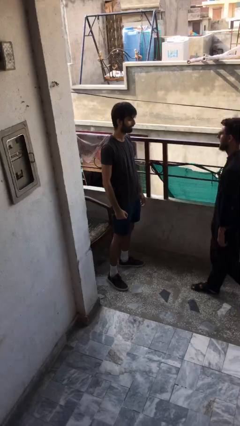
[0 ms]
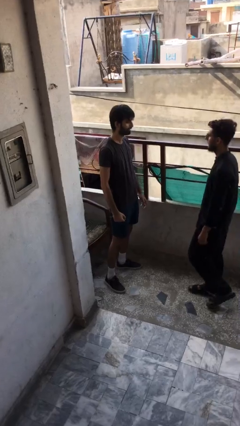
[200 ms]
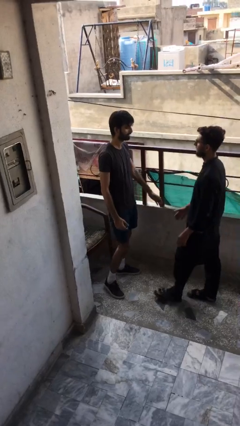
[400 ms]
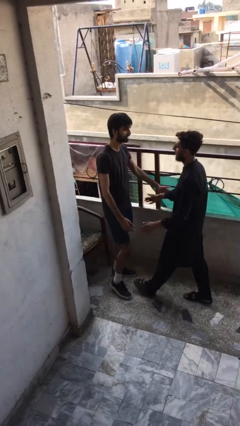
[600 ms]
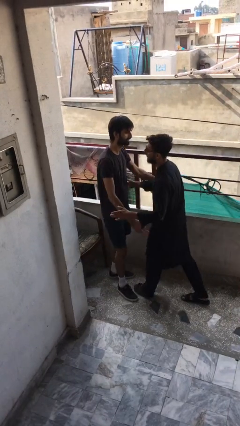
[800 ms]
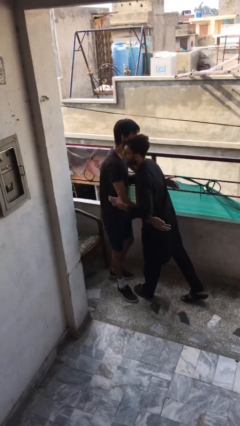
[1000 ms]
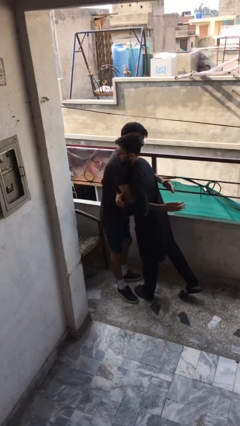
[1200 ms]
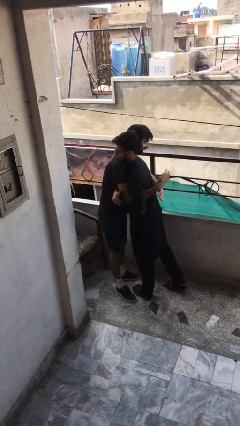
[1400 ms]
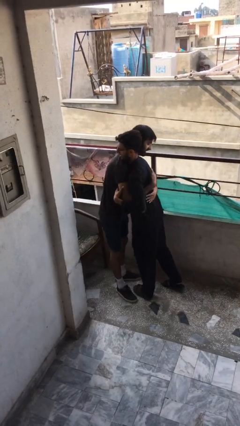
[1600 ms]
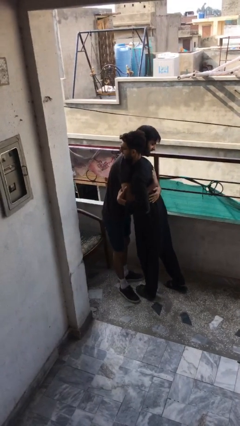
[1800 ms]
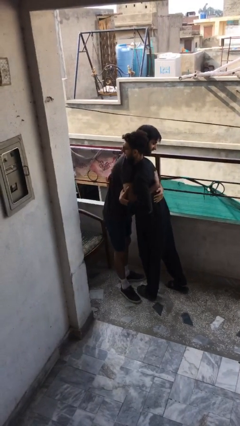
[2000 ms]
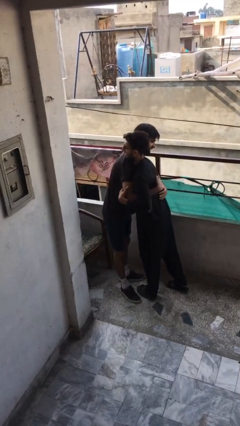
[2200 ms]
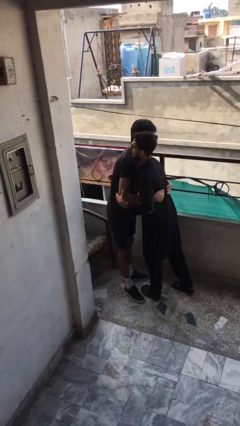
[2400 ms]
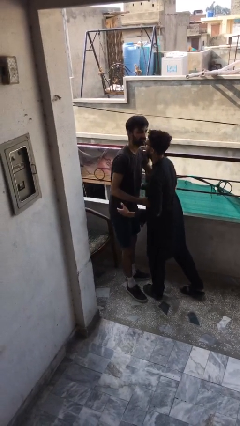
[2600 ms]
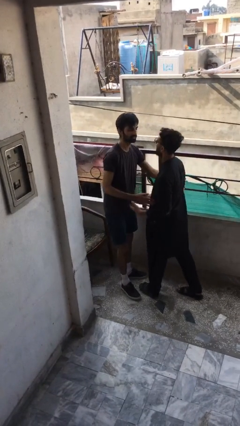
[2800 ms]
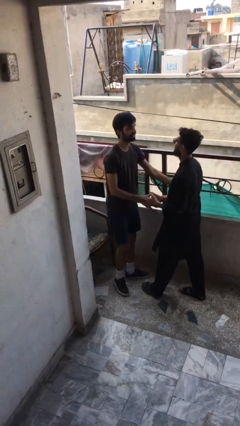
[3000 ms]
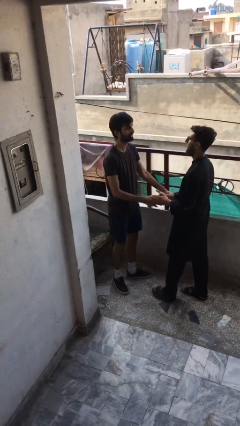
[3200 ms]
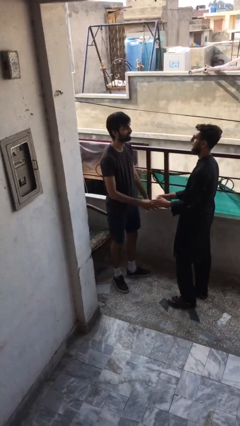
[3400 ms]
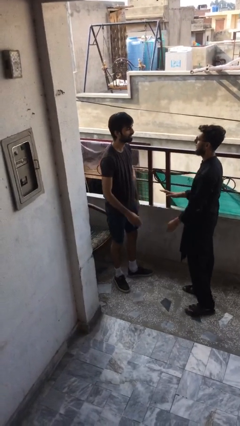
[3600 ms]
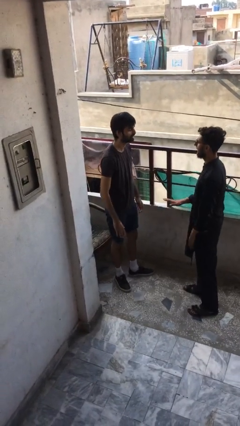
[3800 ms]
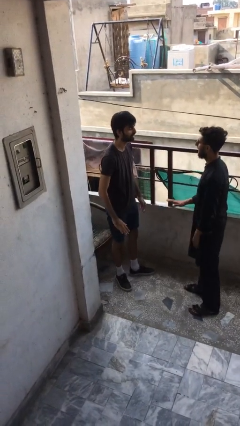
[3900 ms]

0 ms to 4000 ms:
person embraces person

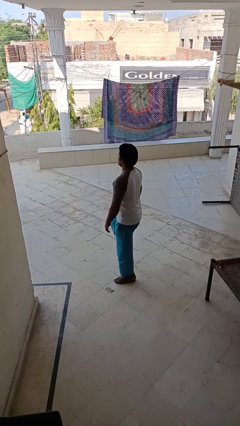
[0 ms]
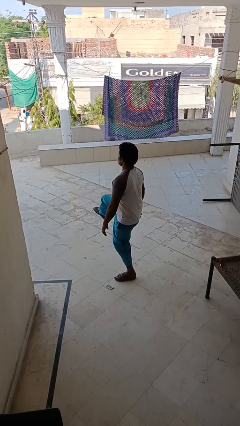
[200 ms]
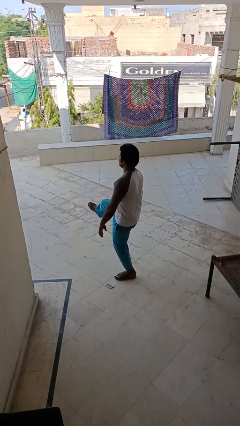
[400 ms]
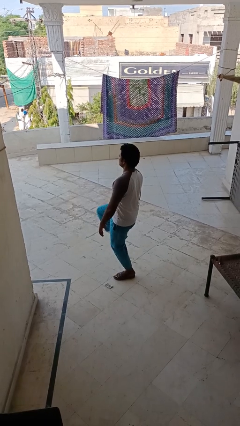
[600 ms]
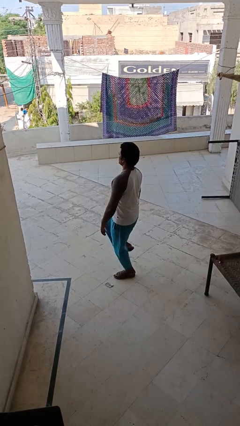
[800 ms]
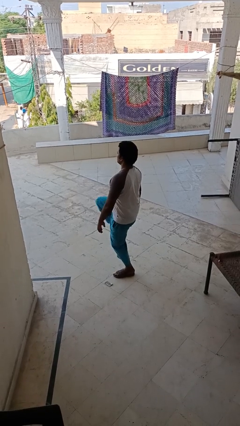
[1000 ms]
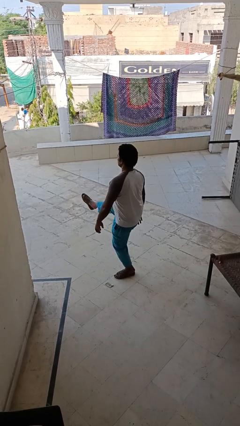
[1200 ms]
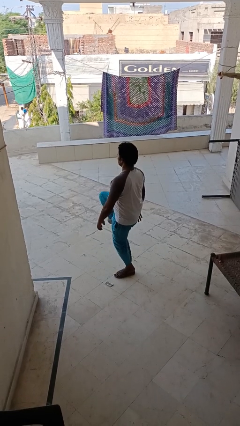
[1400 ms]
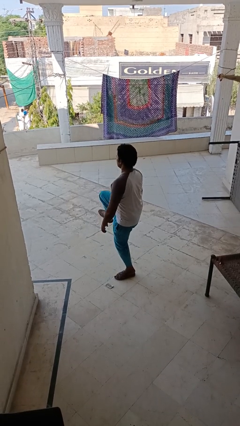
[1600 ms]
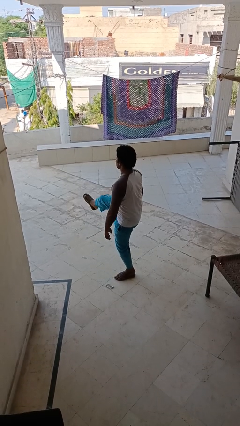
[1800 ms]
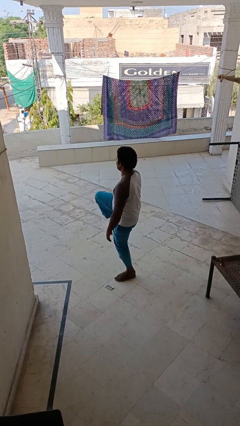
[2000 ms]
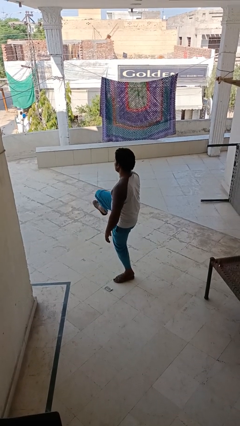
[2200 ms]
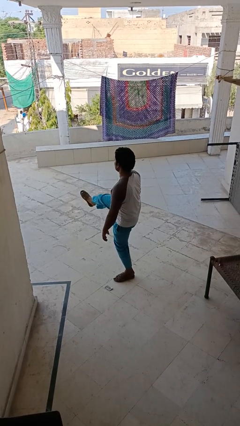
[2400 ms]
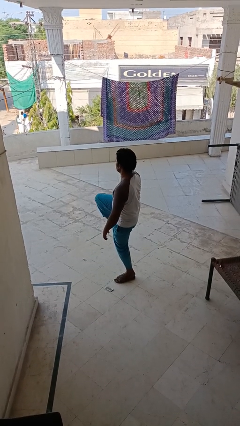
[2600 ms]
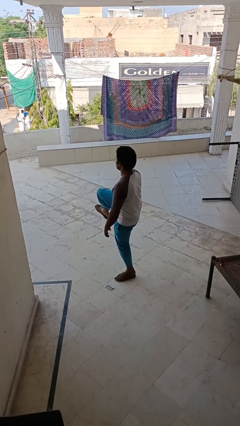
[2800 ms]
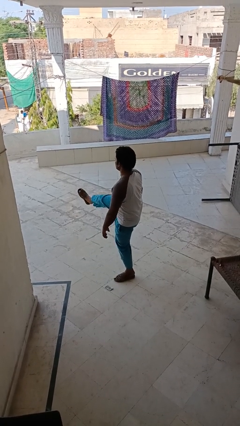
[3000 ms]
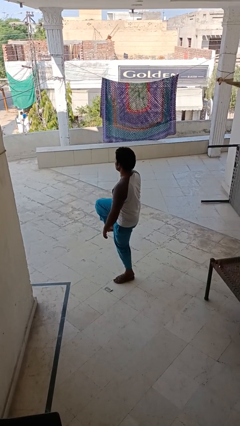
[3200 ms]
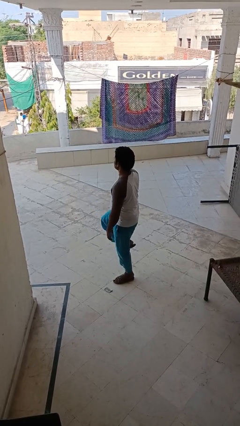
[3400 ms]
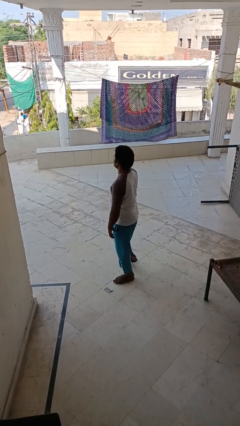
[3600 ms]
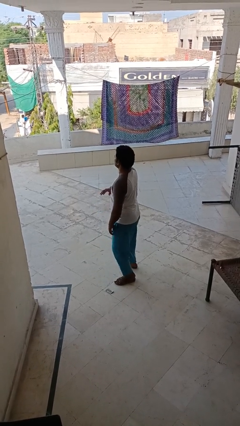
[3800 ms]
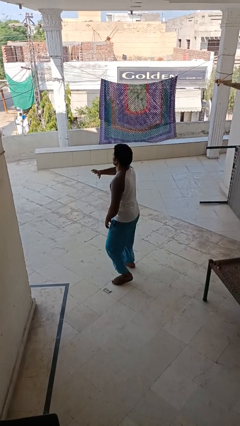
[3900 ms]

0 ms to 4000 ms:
person karate kicks

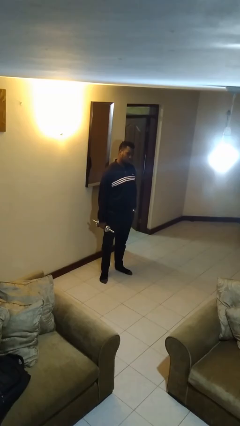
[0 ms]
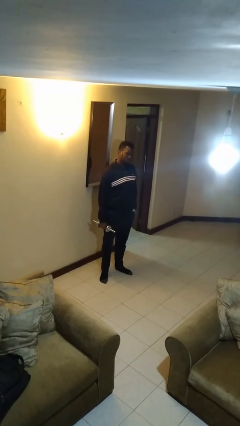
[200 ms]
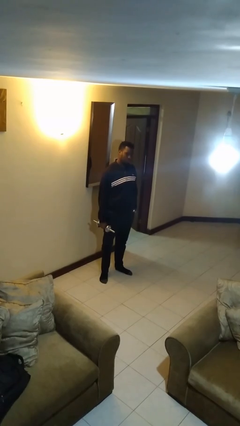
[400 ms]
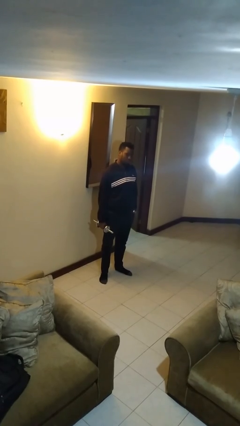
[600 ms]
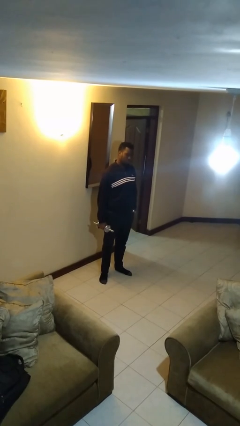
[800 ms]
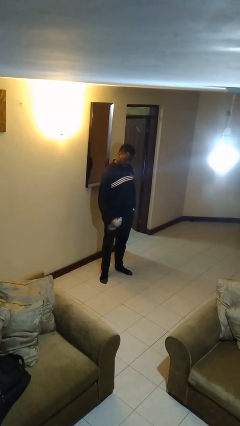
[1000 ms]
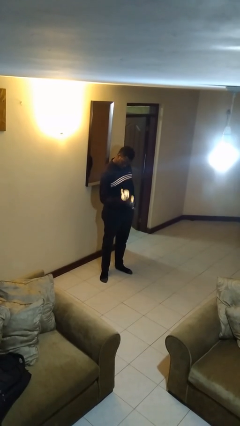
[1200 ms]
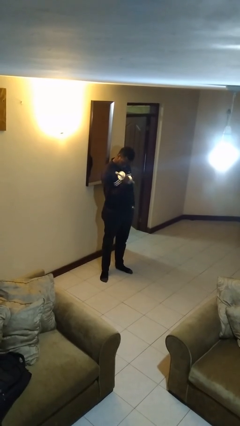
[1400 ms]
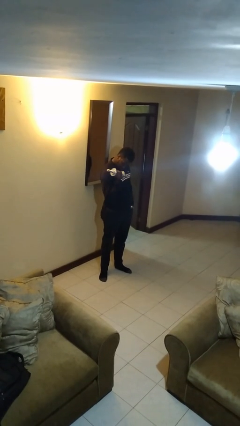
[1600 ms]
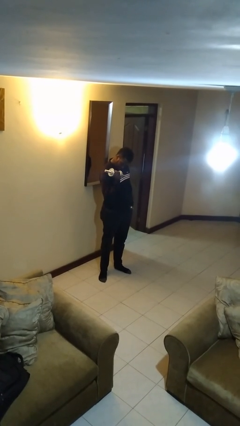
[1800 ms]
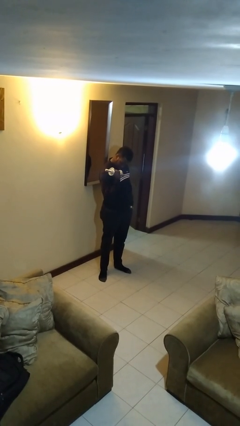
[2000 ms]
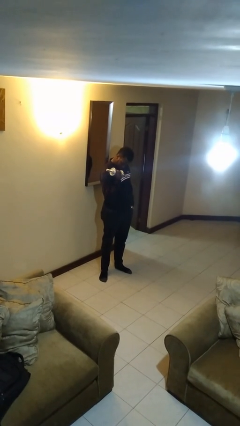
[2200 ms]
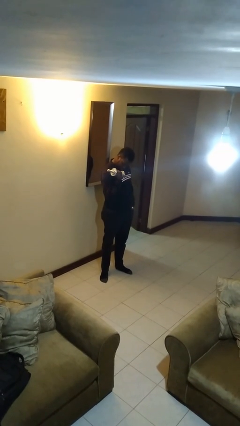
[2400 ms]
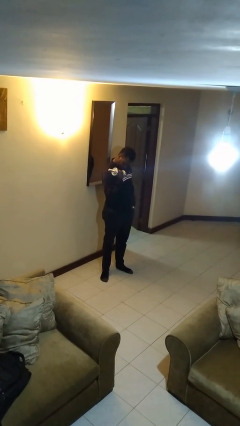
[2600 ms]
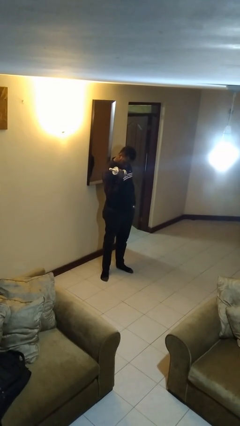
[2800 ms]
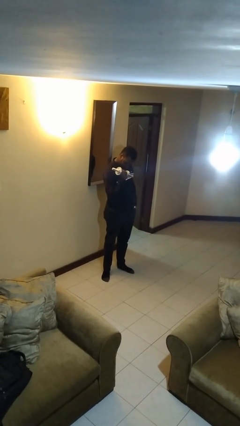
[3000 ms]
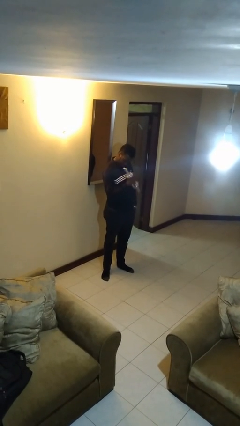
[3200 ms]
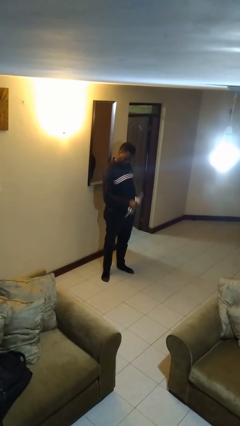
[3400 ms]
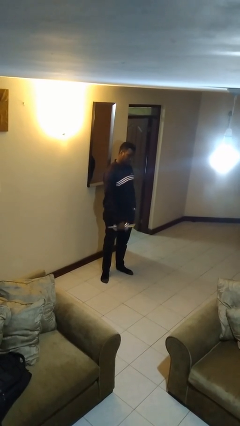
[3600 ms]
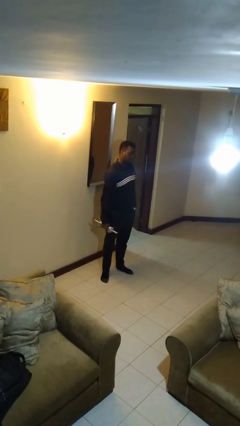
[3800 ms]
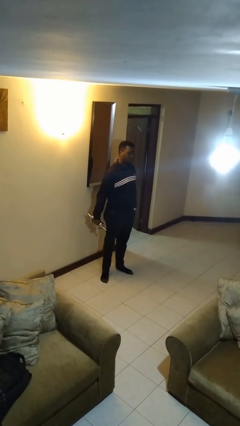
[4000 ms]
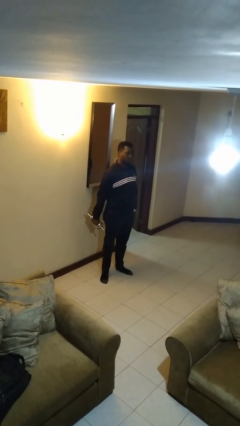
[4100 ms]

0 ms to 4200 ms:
person lifts dumbbells

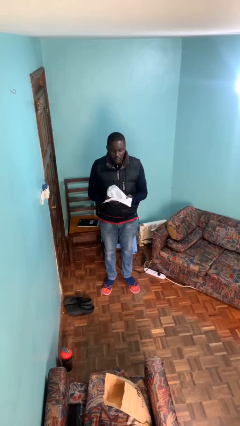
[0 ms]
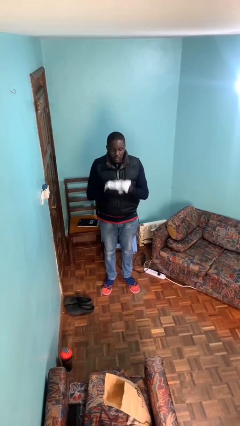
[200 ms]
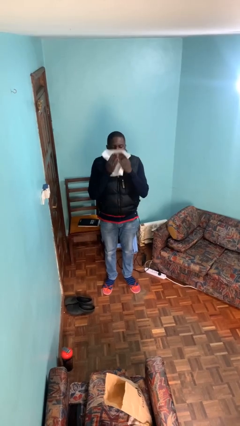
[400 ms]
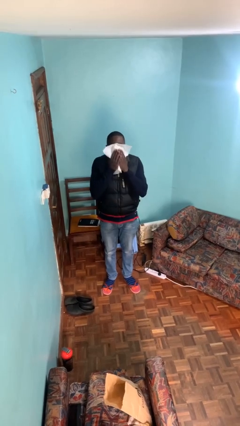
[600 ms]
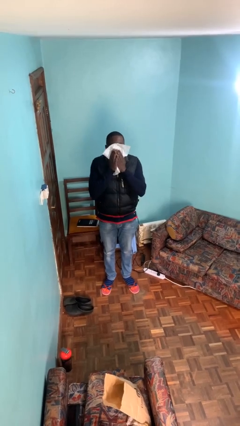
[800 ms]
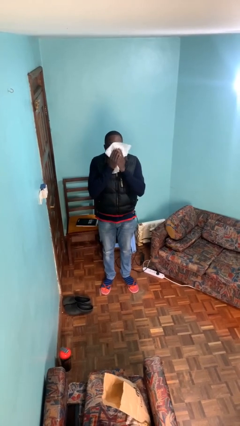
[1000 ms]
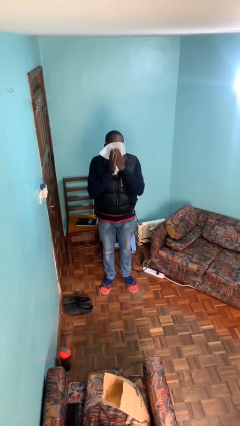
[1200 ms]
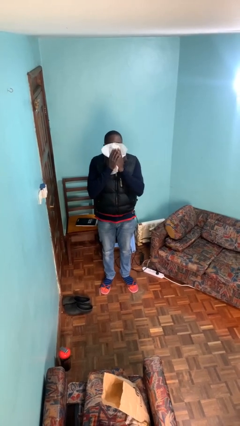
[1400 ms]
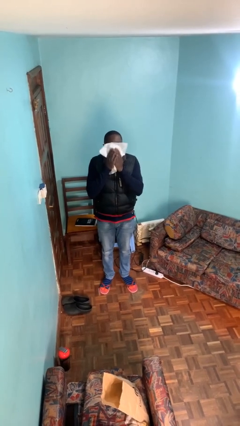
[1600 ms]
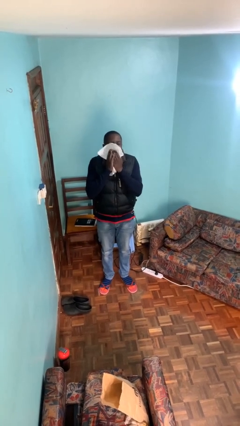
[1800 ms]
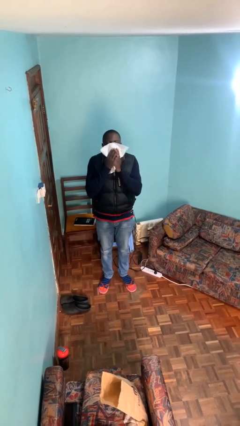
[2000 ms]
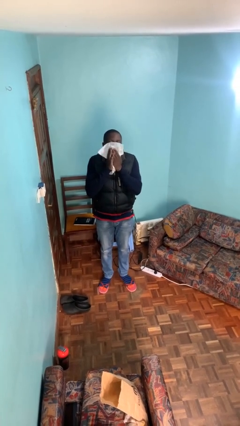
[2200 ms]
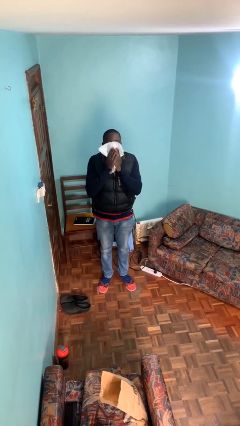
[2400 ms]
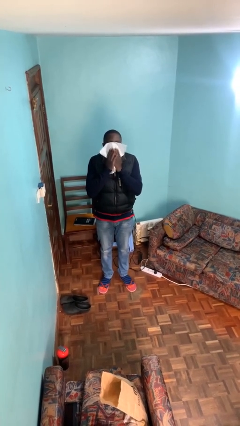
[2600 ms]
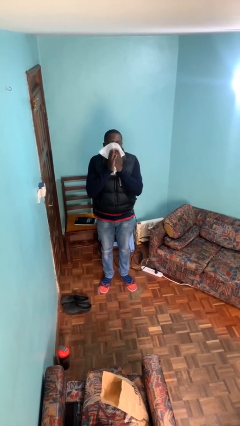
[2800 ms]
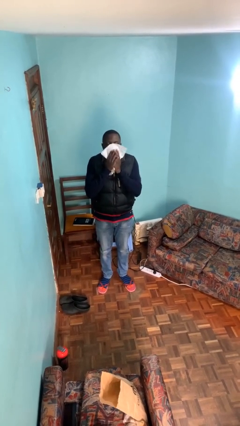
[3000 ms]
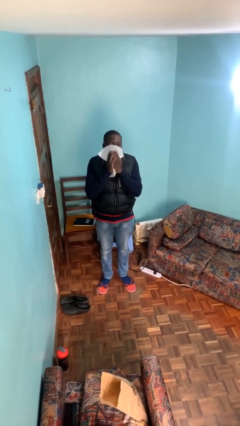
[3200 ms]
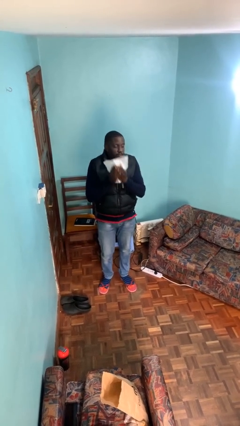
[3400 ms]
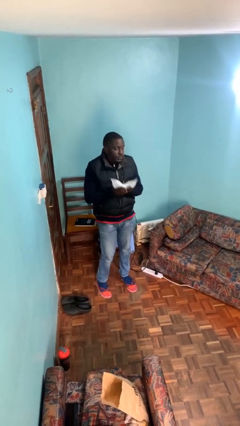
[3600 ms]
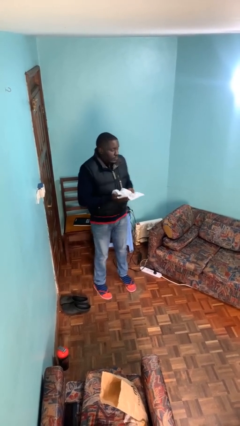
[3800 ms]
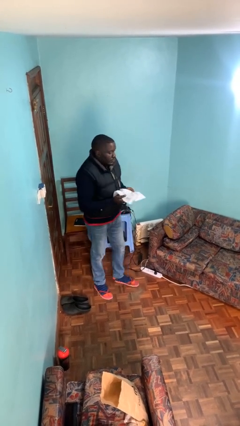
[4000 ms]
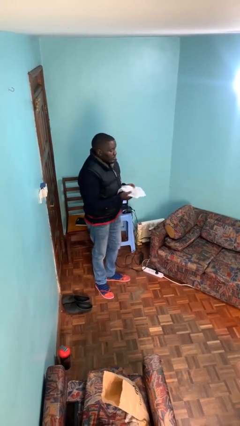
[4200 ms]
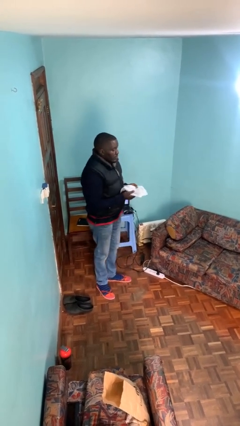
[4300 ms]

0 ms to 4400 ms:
person wipes mouth with napkin

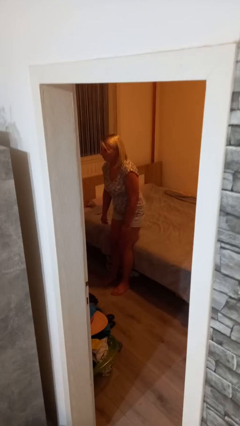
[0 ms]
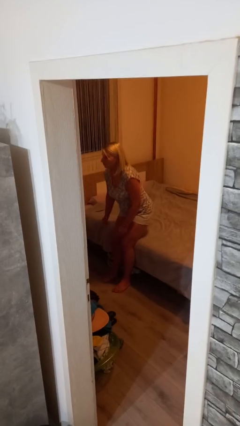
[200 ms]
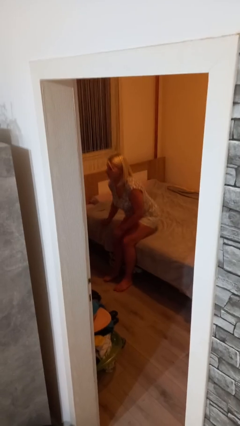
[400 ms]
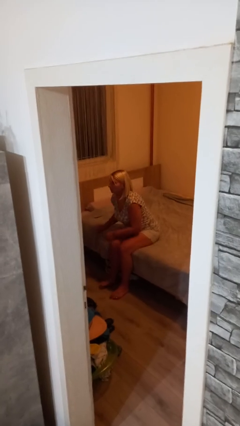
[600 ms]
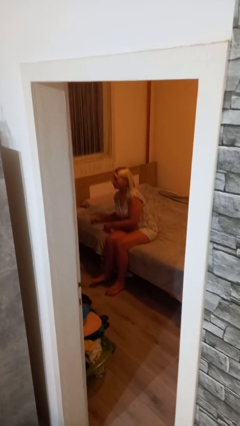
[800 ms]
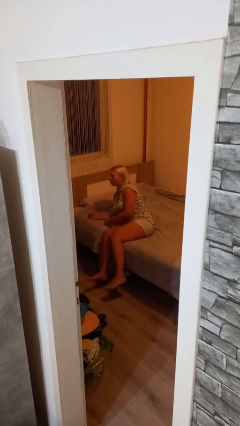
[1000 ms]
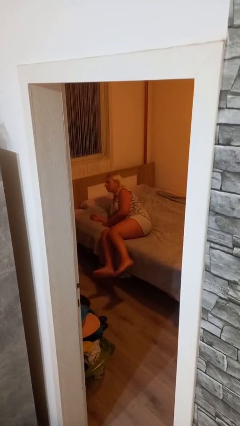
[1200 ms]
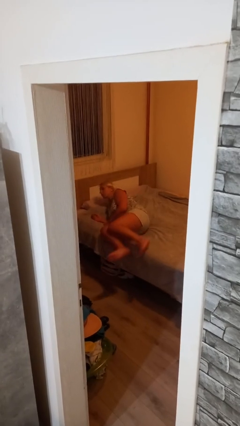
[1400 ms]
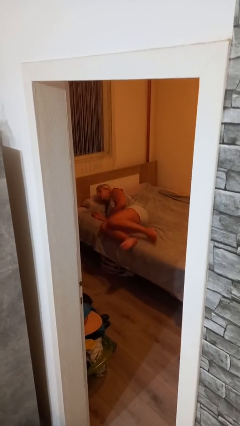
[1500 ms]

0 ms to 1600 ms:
person lies down on bed
